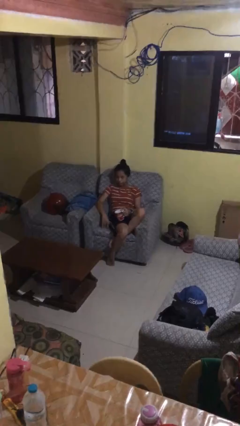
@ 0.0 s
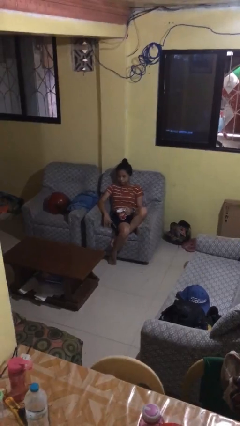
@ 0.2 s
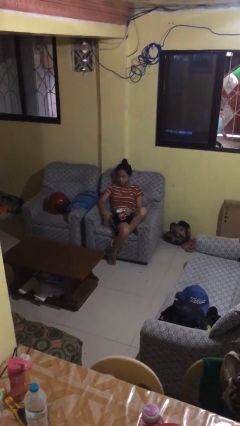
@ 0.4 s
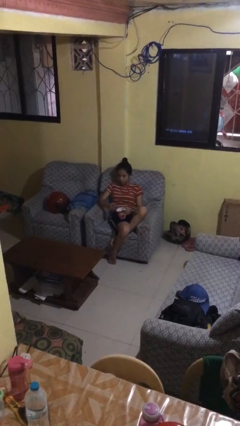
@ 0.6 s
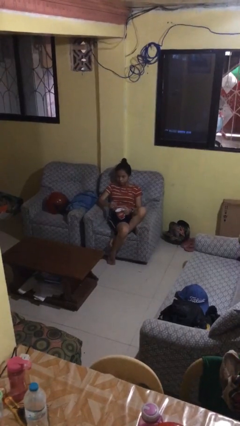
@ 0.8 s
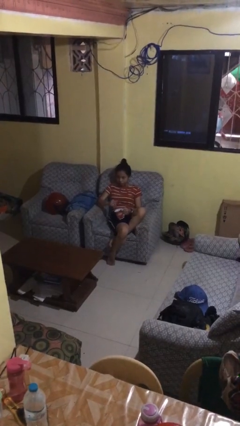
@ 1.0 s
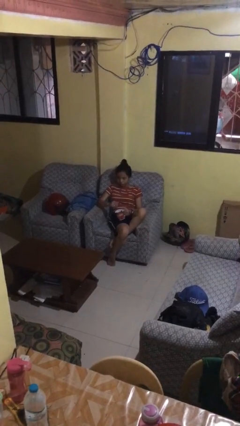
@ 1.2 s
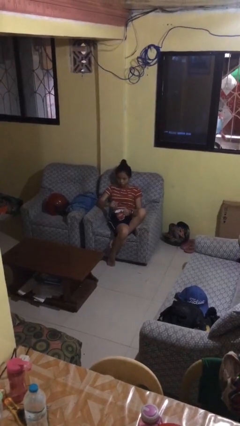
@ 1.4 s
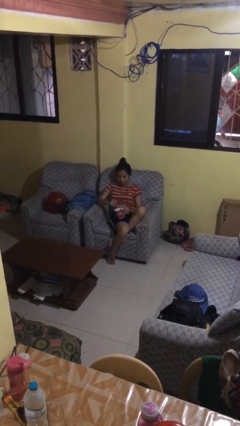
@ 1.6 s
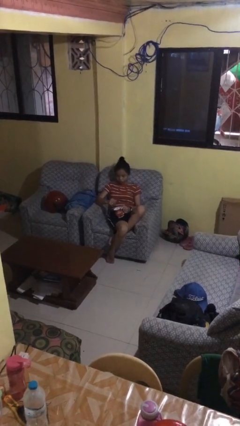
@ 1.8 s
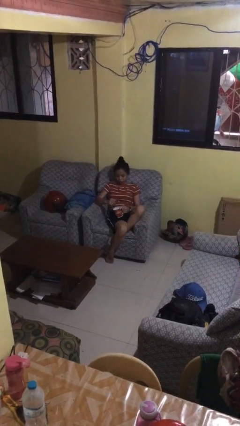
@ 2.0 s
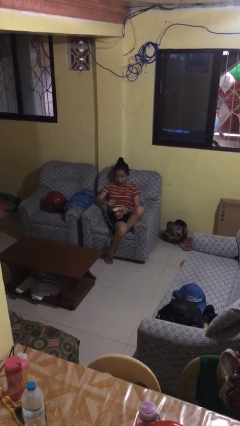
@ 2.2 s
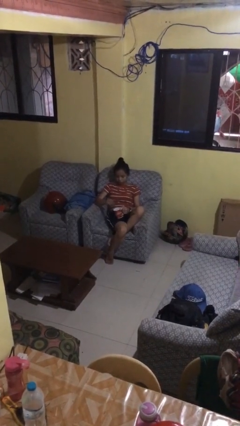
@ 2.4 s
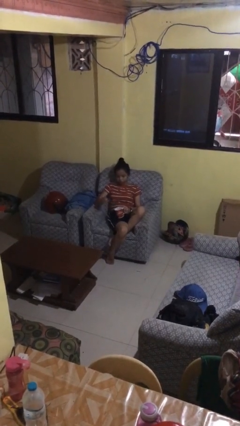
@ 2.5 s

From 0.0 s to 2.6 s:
person stirs mug

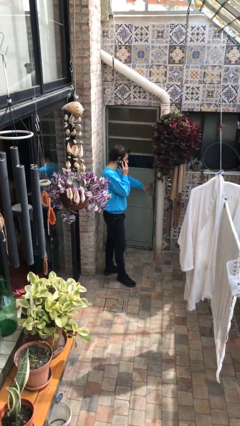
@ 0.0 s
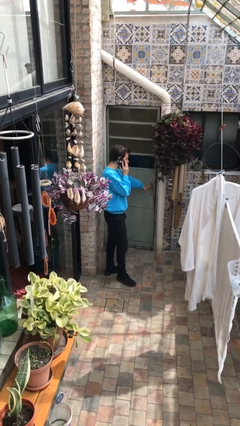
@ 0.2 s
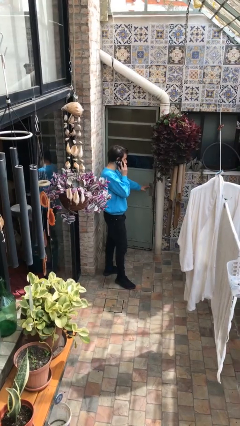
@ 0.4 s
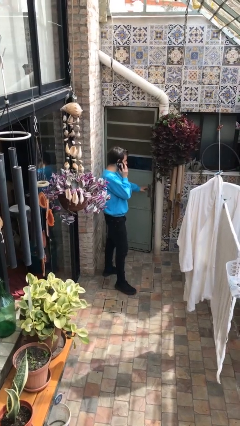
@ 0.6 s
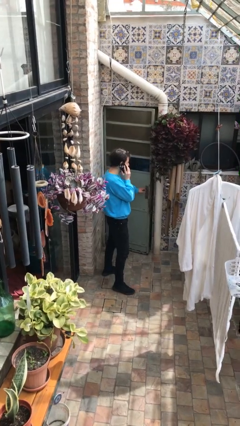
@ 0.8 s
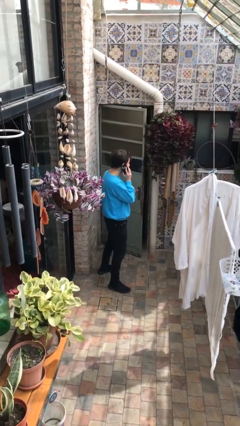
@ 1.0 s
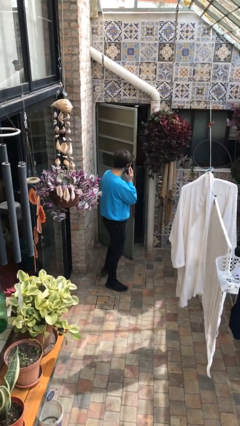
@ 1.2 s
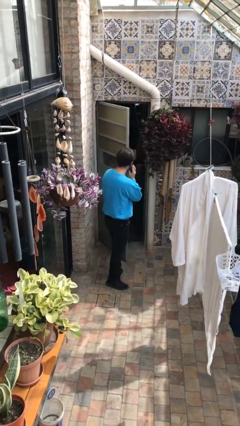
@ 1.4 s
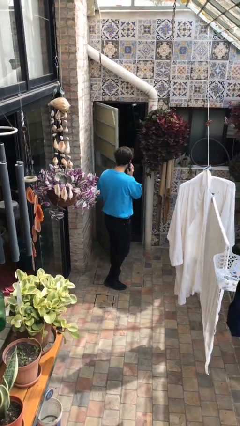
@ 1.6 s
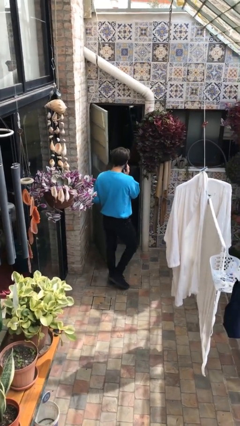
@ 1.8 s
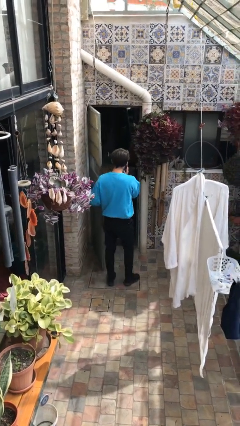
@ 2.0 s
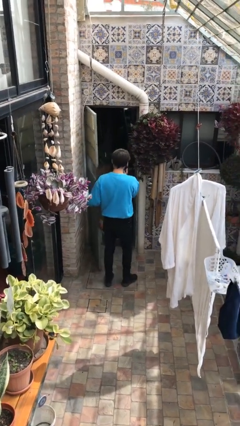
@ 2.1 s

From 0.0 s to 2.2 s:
person opens facility door

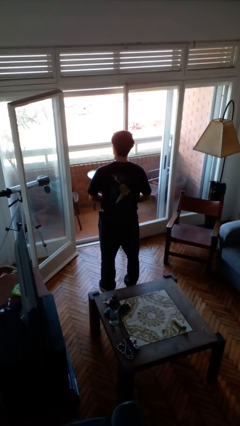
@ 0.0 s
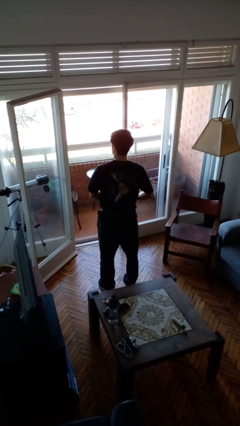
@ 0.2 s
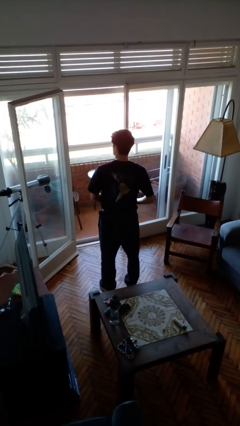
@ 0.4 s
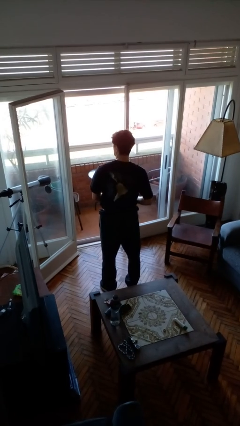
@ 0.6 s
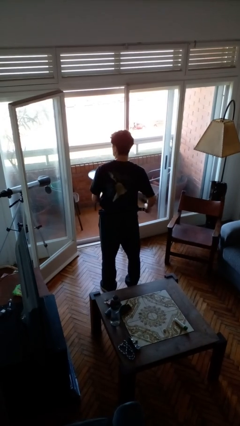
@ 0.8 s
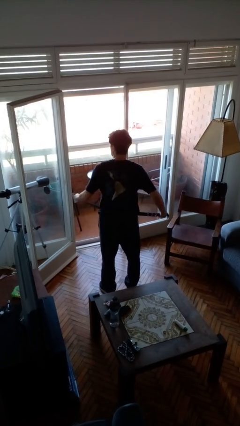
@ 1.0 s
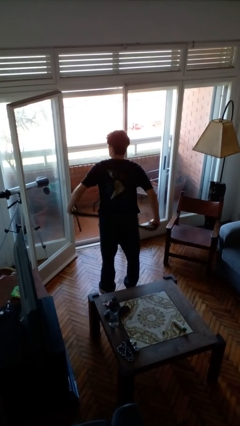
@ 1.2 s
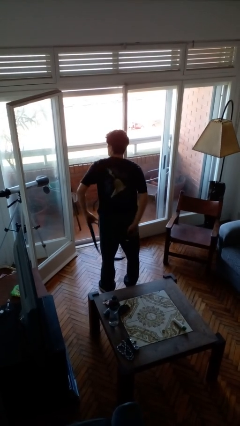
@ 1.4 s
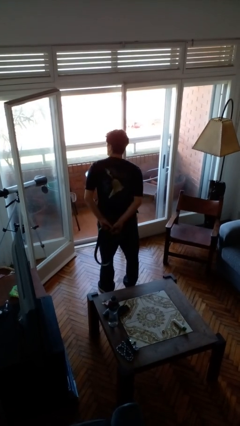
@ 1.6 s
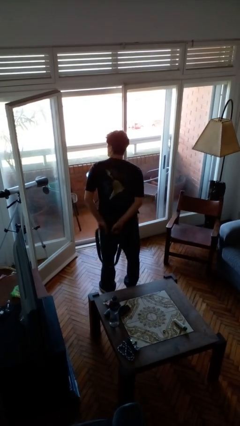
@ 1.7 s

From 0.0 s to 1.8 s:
person takes off belt

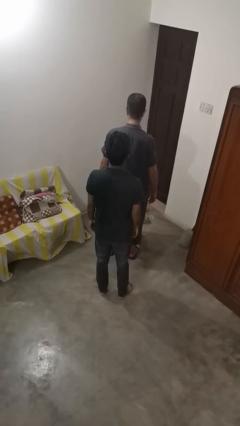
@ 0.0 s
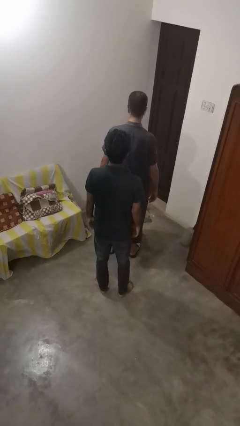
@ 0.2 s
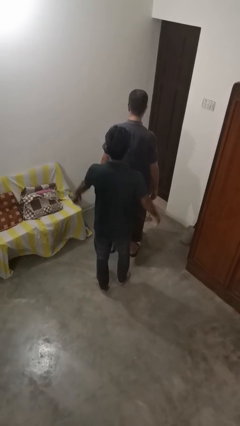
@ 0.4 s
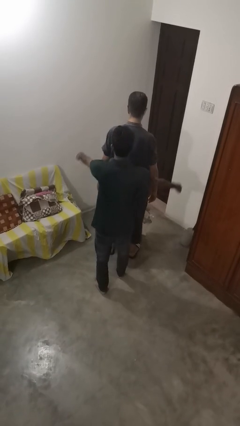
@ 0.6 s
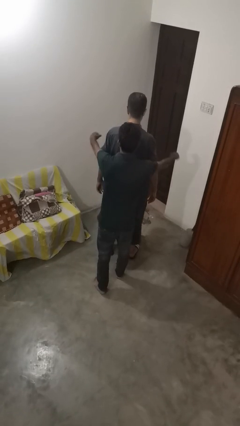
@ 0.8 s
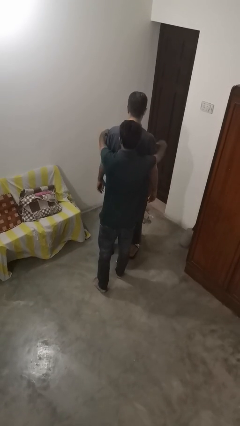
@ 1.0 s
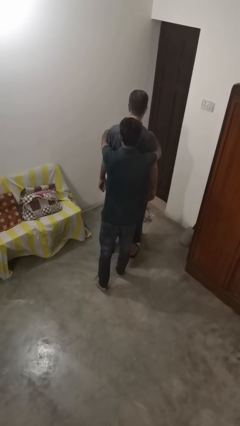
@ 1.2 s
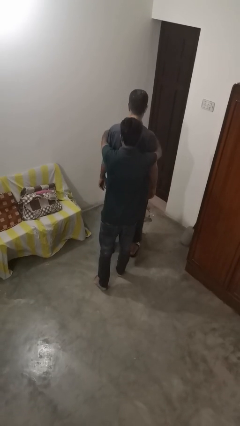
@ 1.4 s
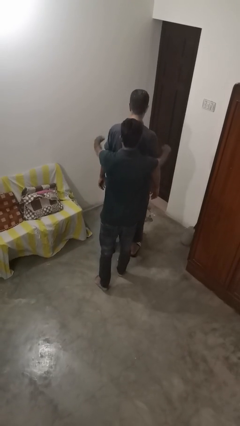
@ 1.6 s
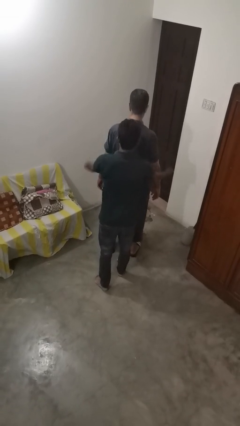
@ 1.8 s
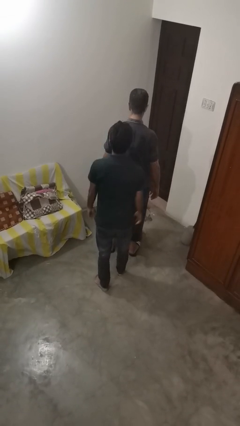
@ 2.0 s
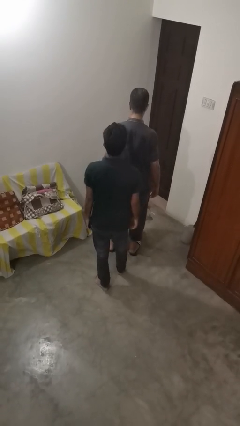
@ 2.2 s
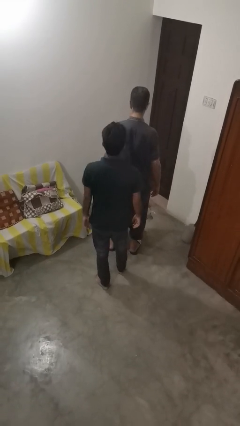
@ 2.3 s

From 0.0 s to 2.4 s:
person hugs person from behind

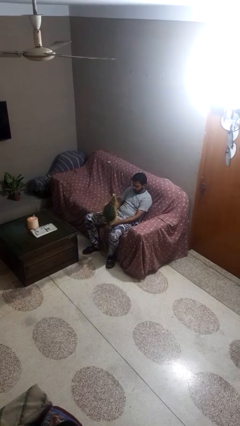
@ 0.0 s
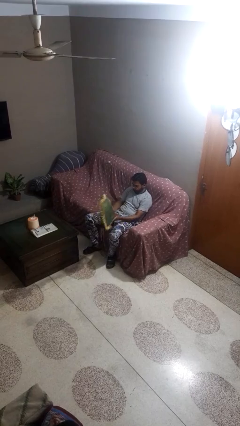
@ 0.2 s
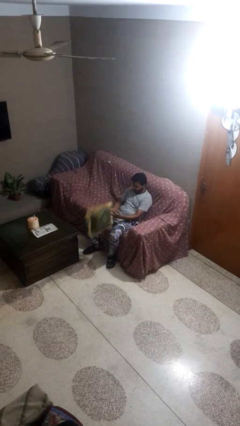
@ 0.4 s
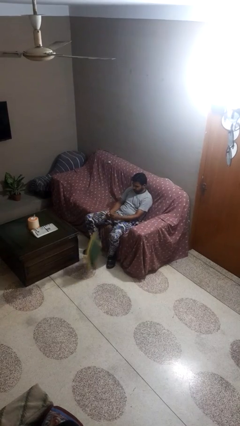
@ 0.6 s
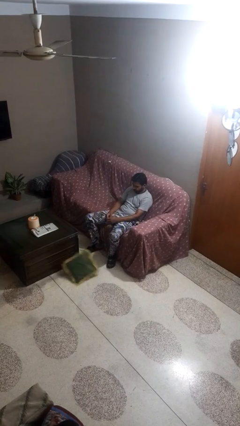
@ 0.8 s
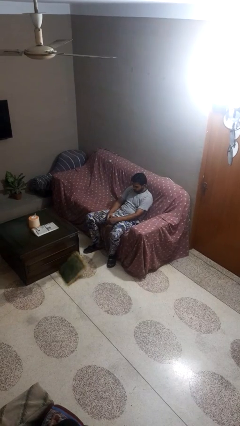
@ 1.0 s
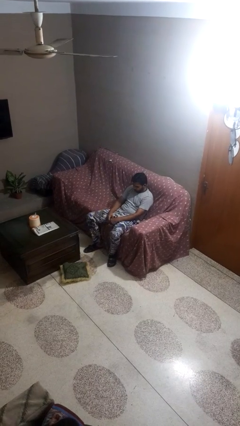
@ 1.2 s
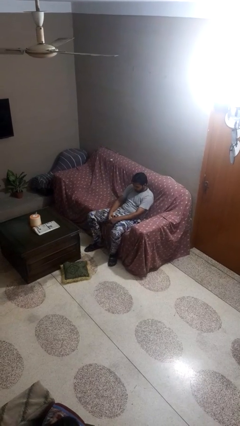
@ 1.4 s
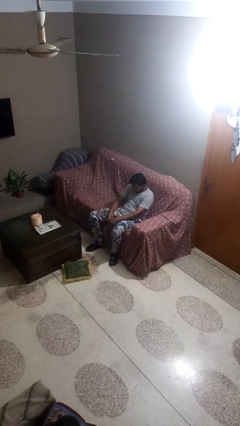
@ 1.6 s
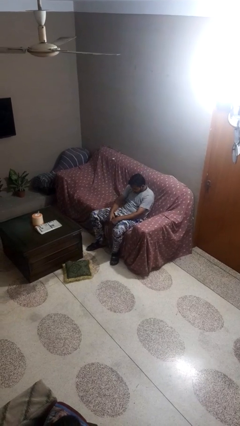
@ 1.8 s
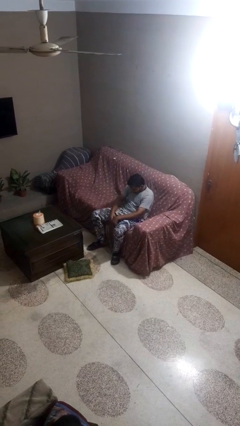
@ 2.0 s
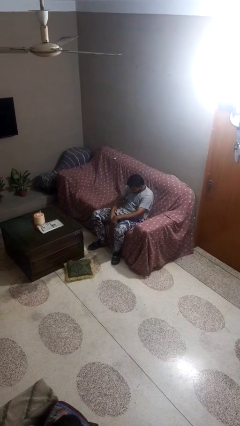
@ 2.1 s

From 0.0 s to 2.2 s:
person drops object

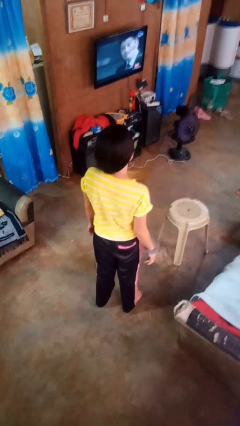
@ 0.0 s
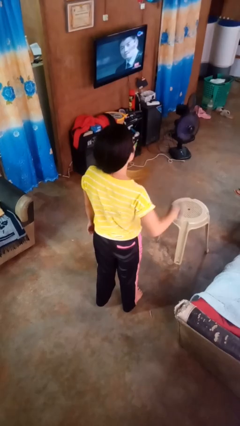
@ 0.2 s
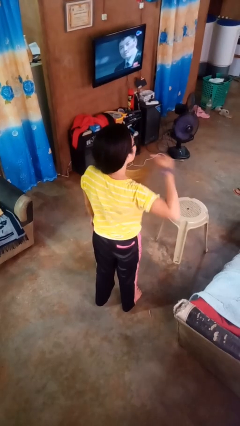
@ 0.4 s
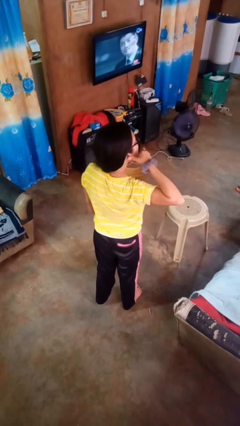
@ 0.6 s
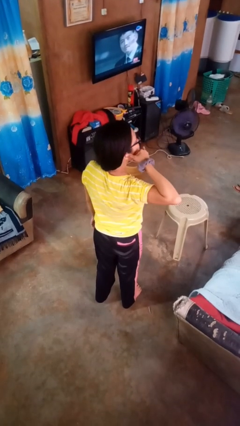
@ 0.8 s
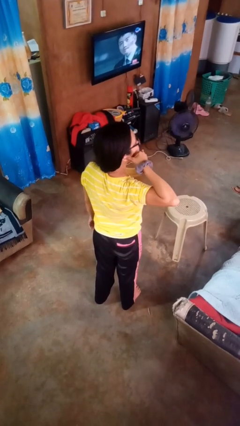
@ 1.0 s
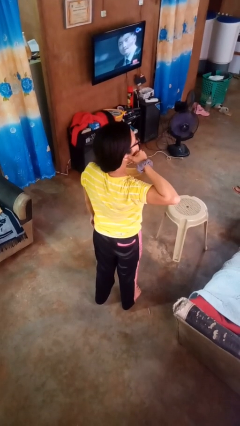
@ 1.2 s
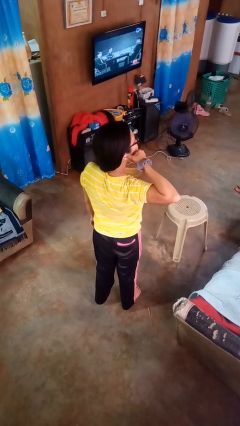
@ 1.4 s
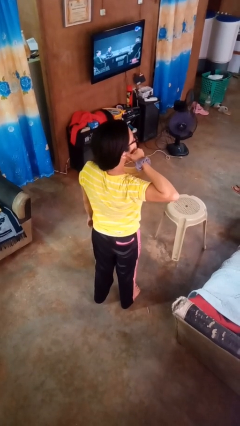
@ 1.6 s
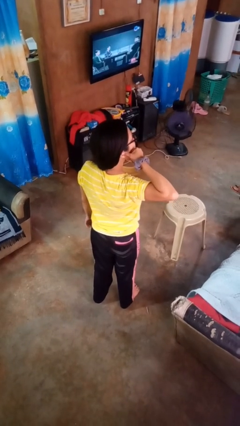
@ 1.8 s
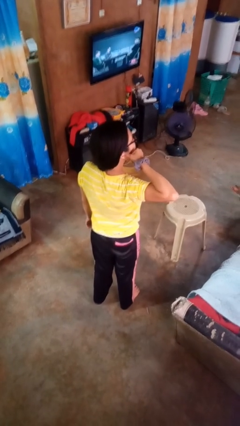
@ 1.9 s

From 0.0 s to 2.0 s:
person gestures call me

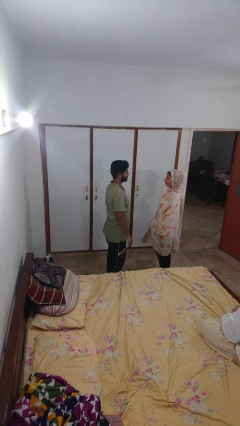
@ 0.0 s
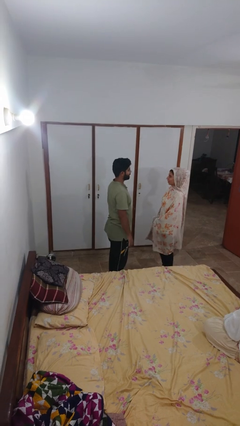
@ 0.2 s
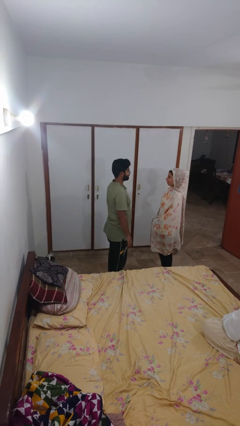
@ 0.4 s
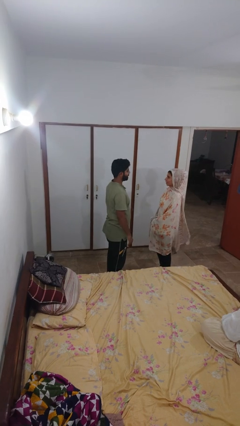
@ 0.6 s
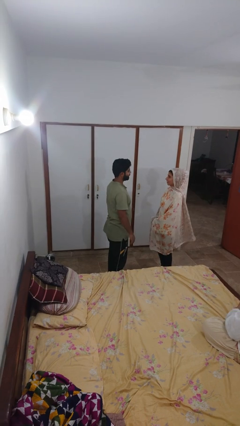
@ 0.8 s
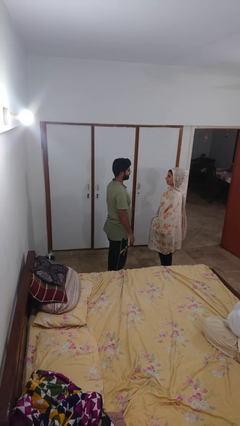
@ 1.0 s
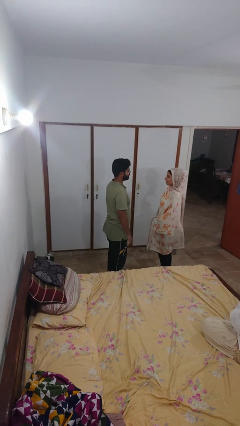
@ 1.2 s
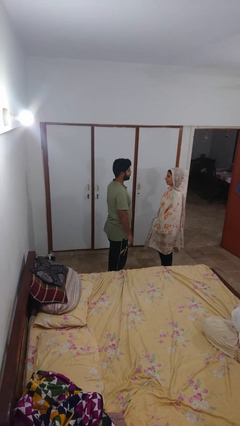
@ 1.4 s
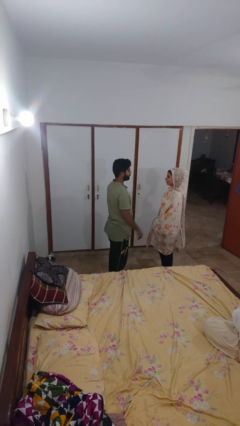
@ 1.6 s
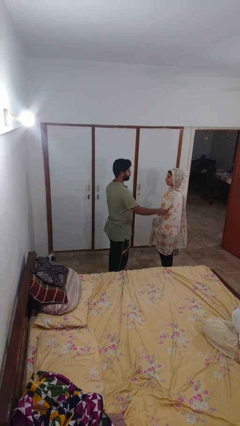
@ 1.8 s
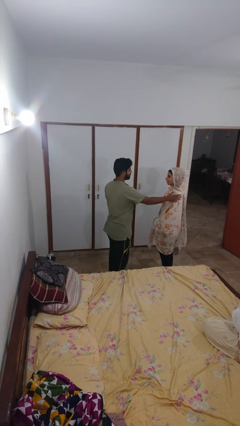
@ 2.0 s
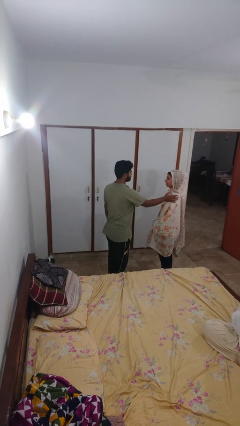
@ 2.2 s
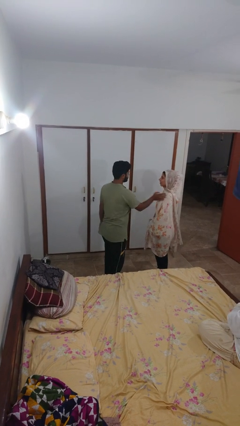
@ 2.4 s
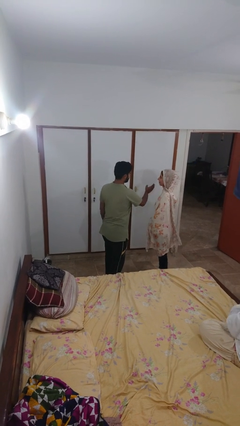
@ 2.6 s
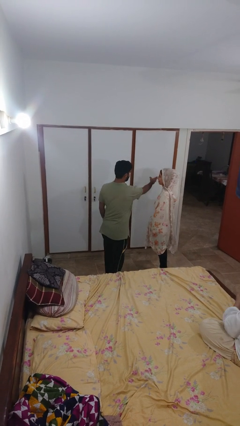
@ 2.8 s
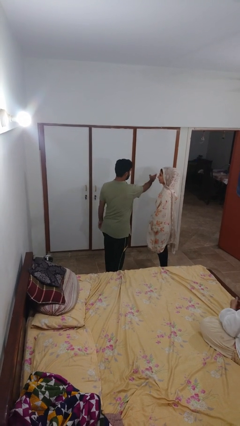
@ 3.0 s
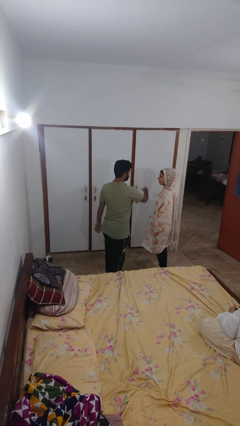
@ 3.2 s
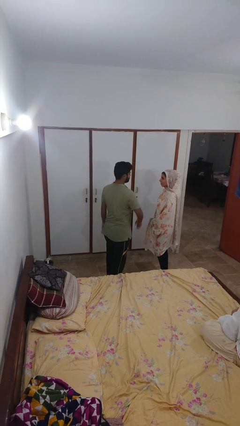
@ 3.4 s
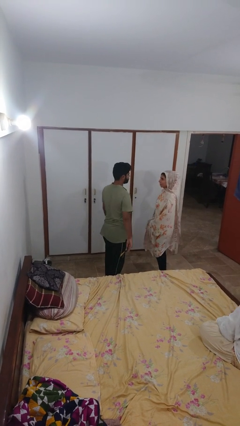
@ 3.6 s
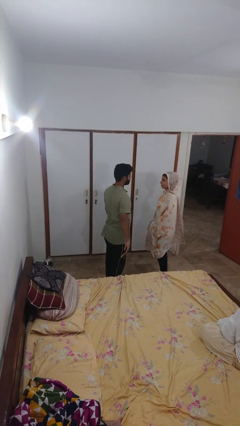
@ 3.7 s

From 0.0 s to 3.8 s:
person shoves person

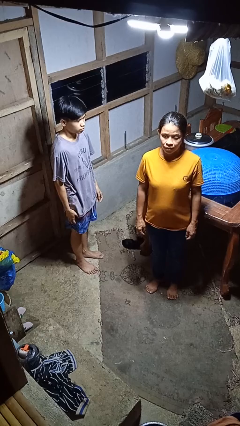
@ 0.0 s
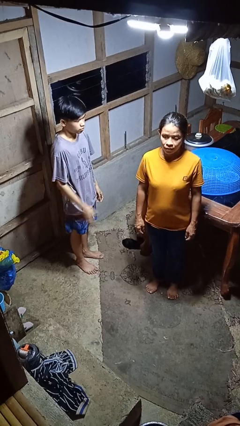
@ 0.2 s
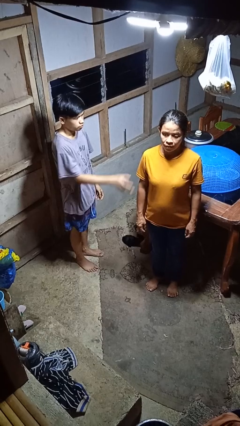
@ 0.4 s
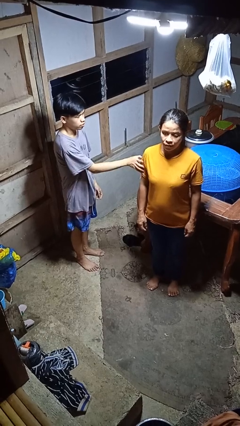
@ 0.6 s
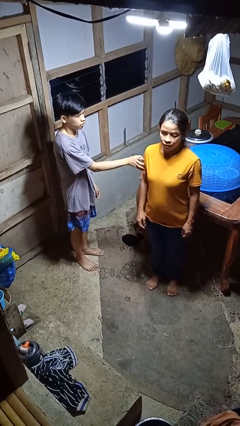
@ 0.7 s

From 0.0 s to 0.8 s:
person grabs person by bicep
